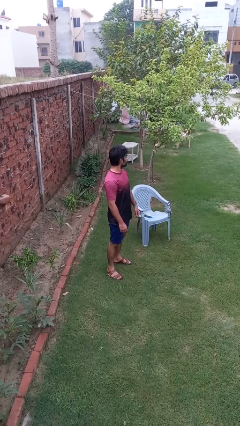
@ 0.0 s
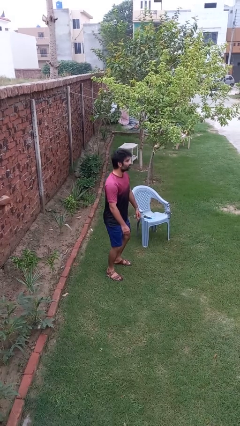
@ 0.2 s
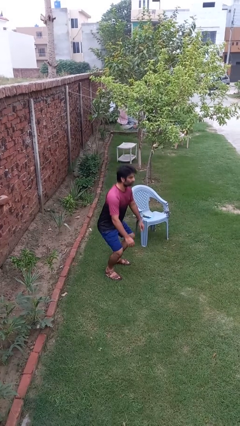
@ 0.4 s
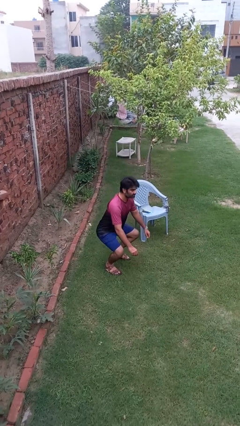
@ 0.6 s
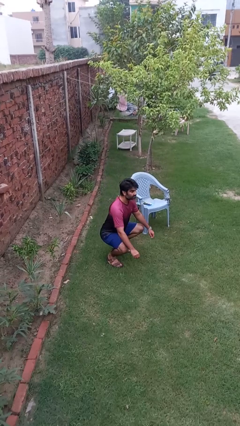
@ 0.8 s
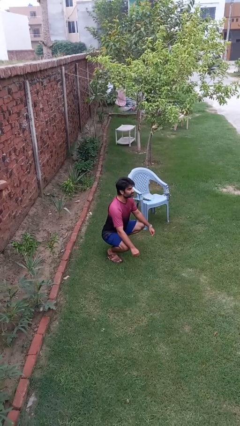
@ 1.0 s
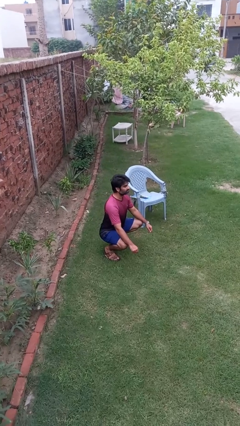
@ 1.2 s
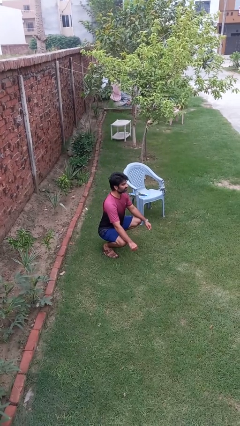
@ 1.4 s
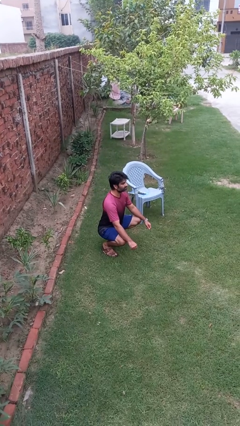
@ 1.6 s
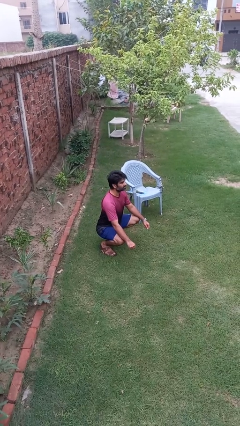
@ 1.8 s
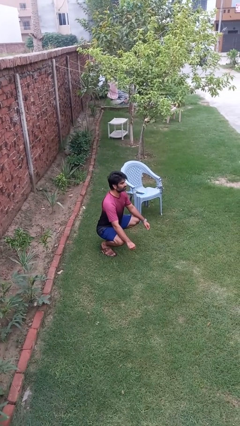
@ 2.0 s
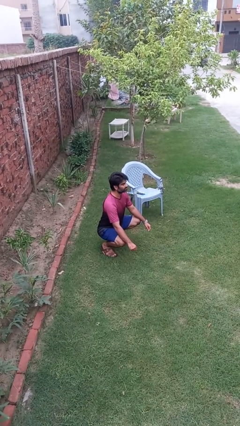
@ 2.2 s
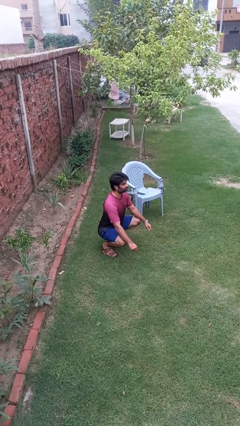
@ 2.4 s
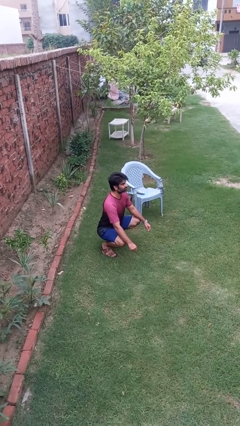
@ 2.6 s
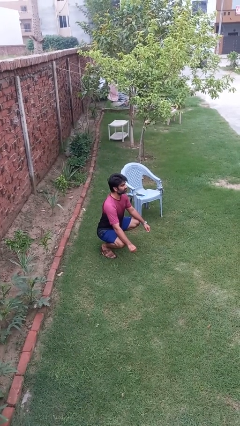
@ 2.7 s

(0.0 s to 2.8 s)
person squats

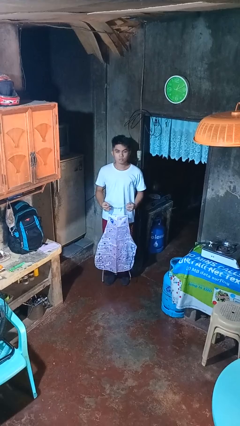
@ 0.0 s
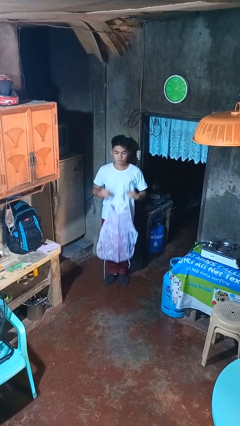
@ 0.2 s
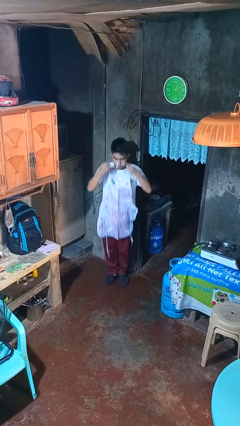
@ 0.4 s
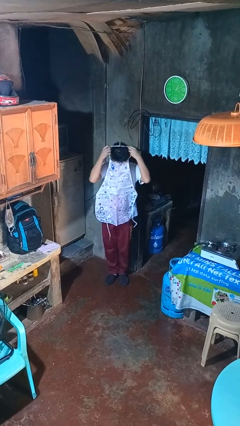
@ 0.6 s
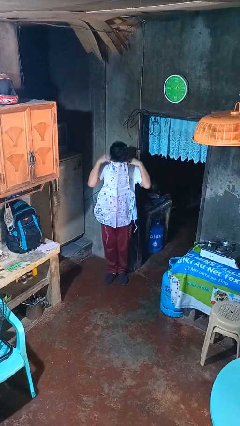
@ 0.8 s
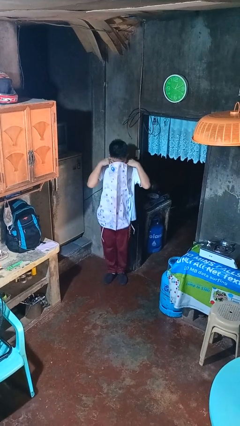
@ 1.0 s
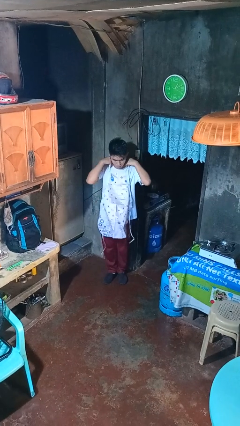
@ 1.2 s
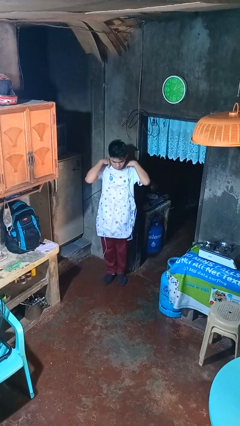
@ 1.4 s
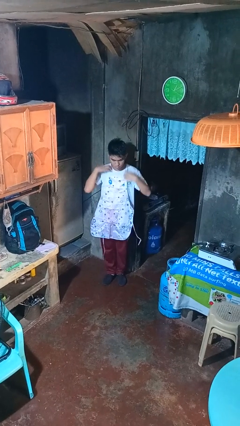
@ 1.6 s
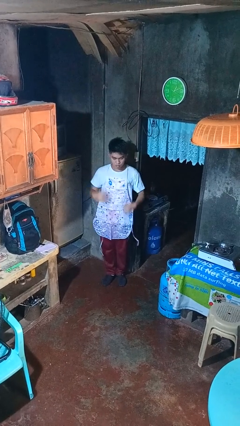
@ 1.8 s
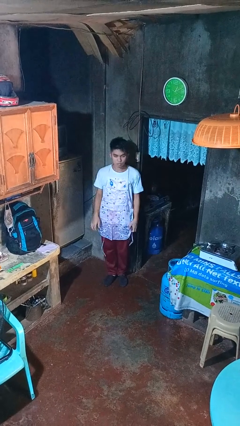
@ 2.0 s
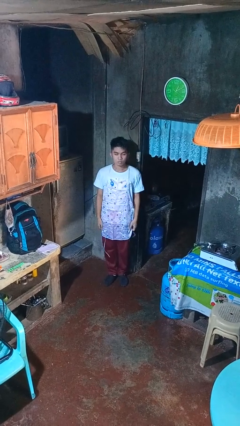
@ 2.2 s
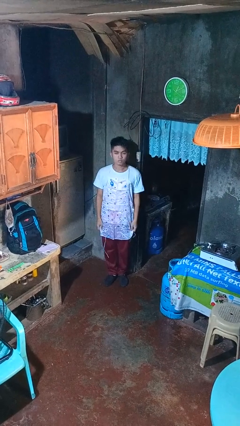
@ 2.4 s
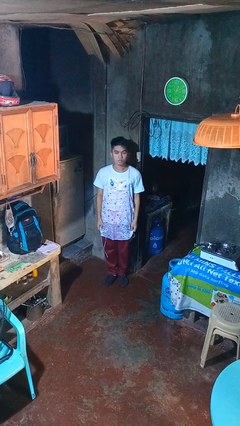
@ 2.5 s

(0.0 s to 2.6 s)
person puts on apron

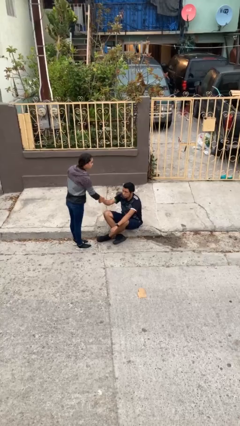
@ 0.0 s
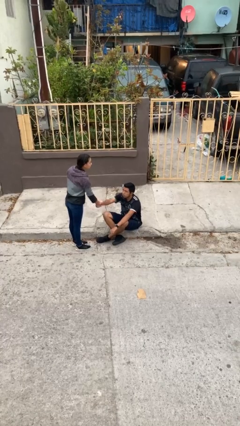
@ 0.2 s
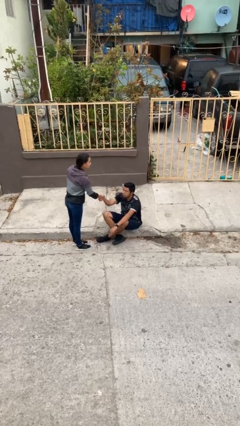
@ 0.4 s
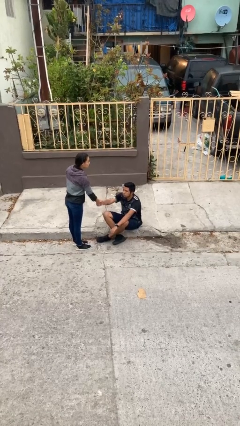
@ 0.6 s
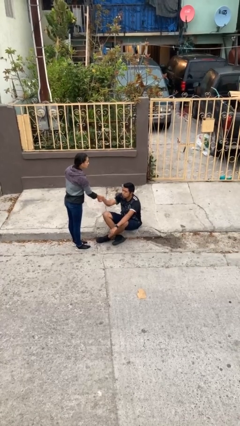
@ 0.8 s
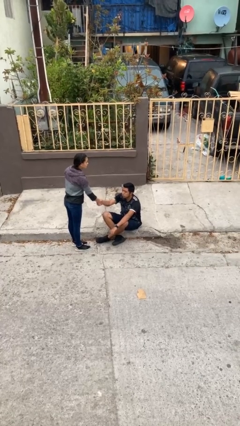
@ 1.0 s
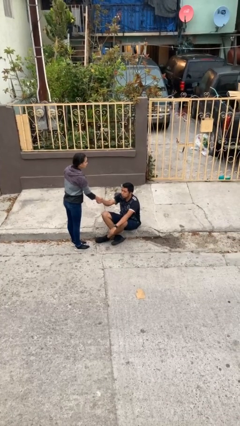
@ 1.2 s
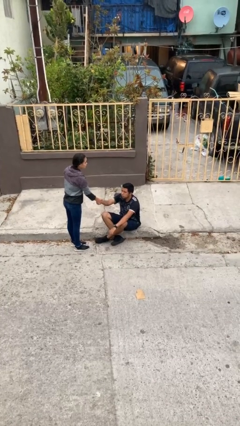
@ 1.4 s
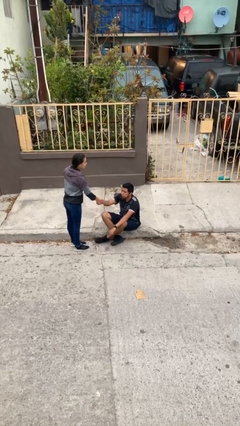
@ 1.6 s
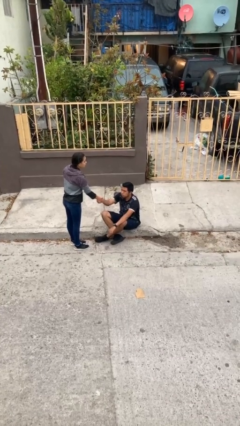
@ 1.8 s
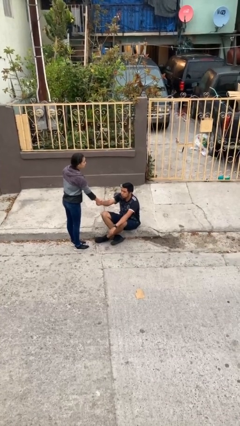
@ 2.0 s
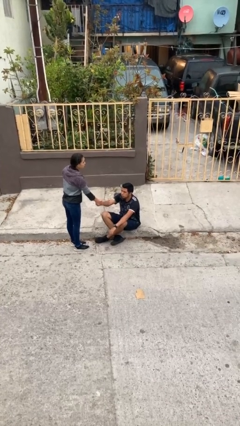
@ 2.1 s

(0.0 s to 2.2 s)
person shakes hand

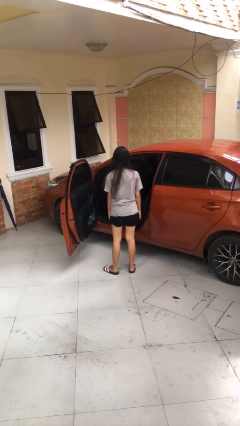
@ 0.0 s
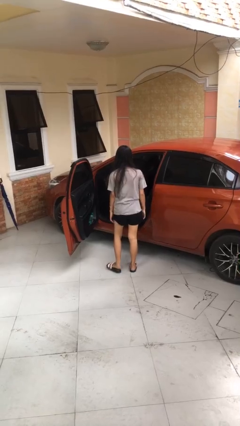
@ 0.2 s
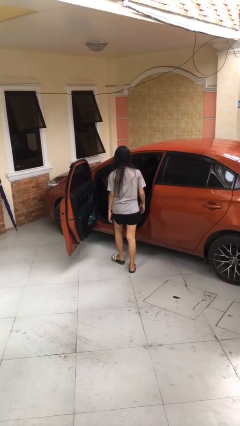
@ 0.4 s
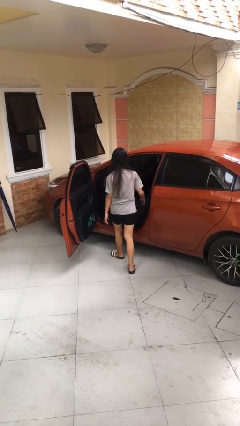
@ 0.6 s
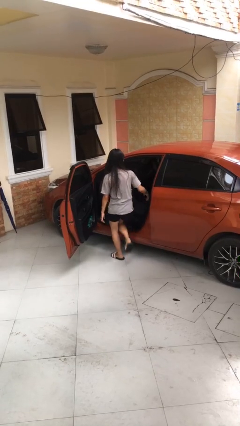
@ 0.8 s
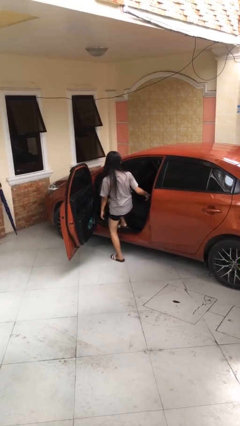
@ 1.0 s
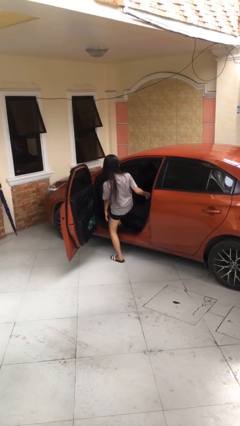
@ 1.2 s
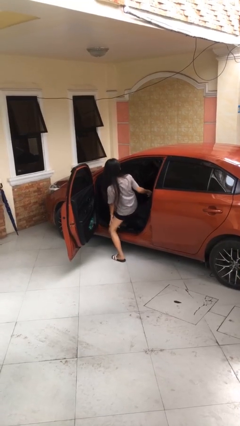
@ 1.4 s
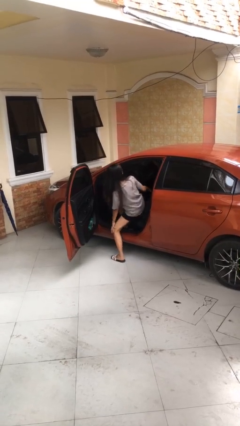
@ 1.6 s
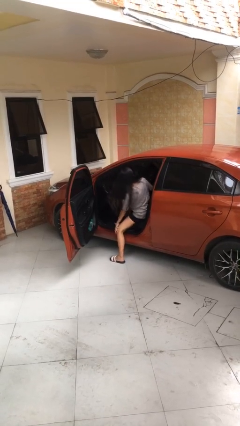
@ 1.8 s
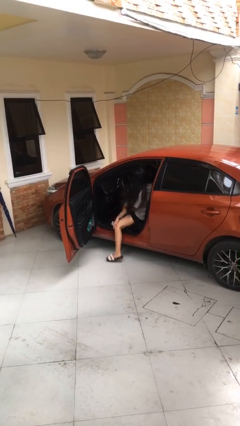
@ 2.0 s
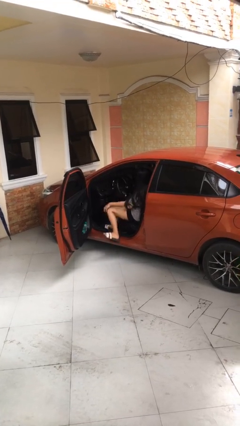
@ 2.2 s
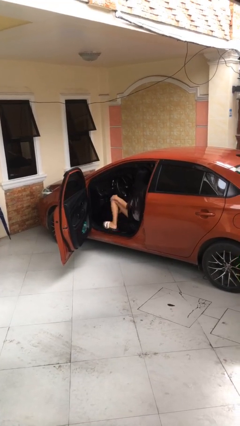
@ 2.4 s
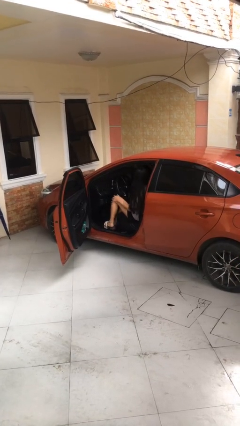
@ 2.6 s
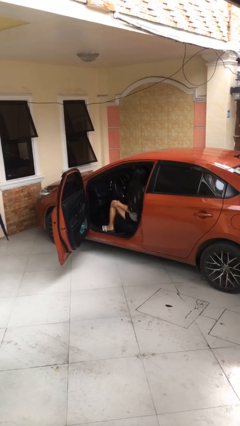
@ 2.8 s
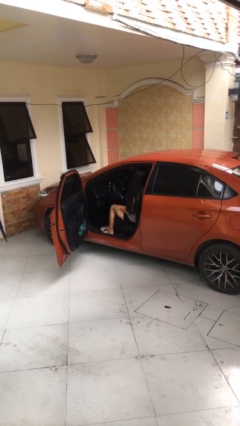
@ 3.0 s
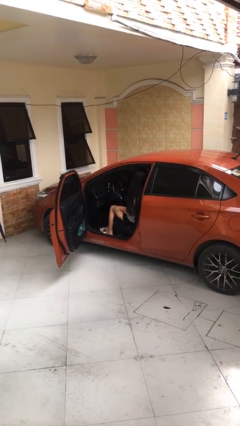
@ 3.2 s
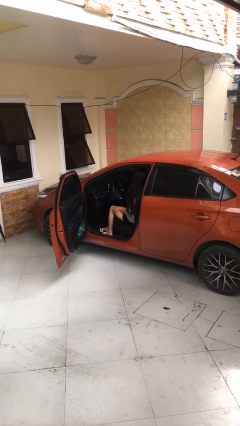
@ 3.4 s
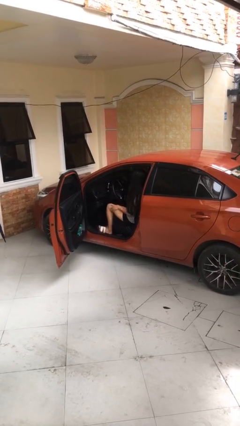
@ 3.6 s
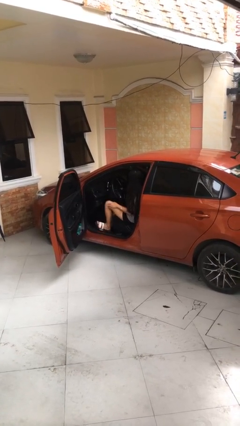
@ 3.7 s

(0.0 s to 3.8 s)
person enters car

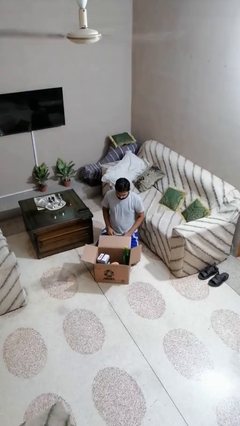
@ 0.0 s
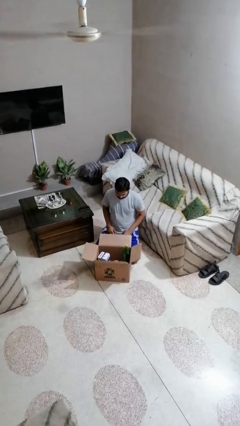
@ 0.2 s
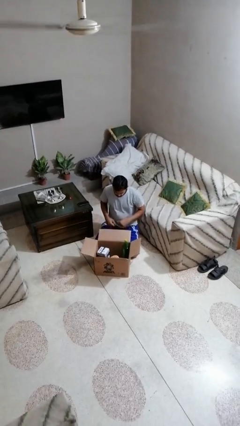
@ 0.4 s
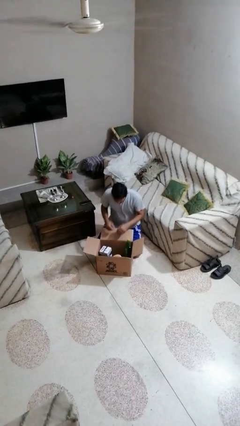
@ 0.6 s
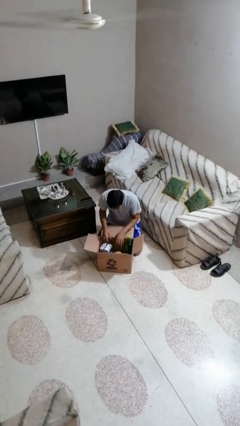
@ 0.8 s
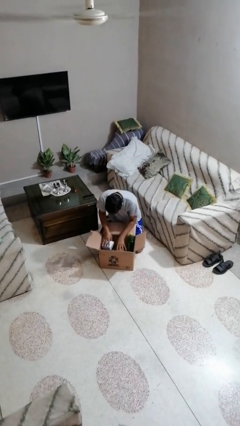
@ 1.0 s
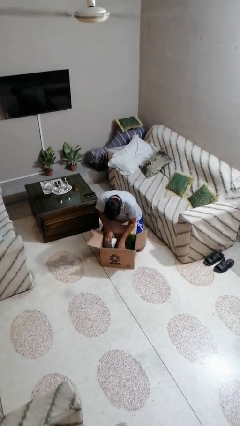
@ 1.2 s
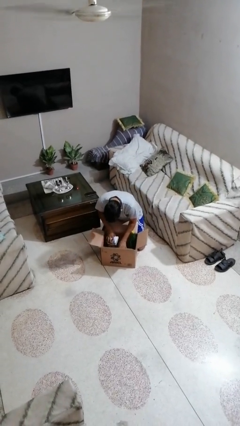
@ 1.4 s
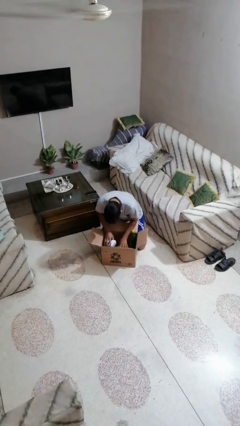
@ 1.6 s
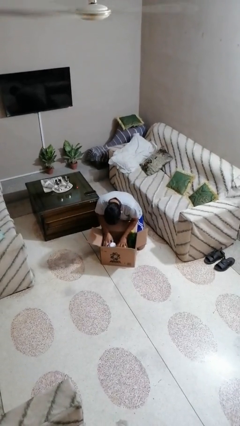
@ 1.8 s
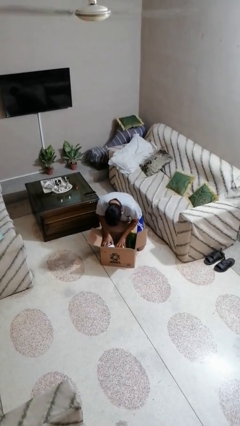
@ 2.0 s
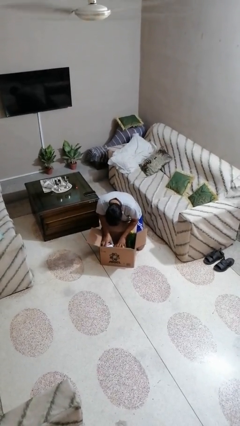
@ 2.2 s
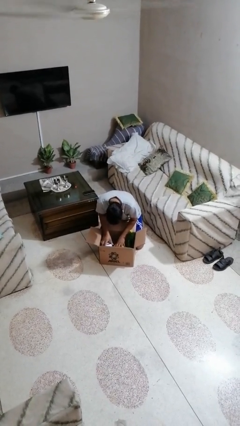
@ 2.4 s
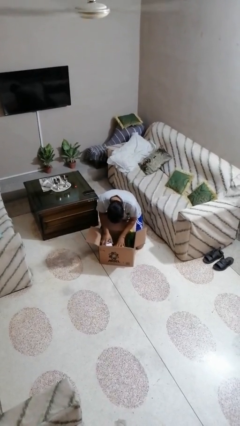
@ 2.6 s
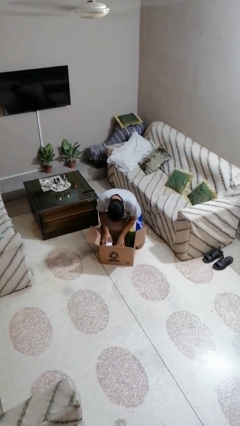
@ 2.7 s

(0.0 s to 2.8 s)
person searches in box

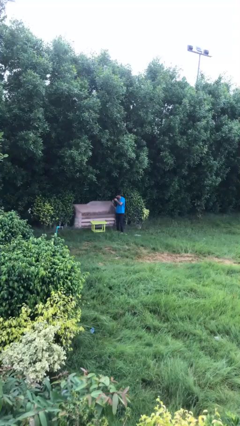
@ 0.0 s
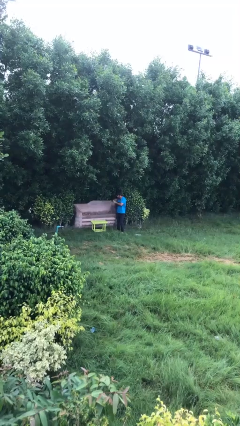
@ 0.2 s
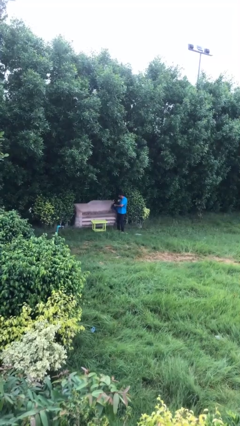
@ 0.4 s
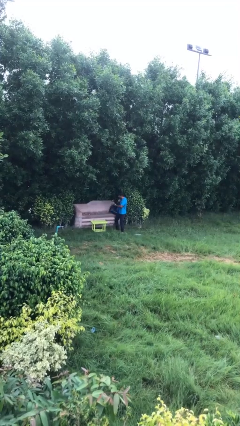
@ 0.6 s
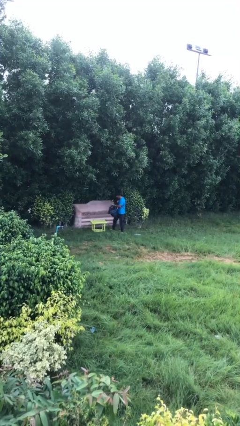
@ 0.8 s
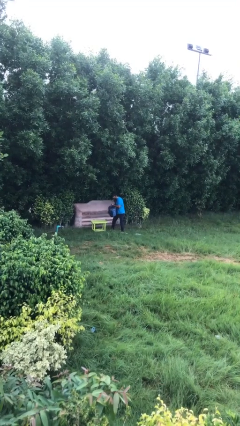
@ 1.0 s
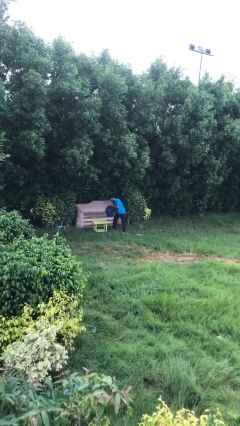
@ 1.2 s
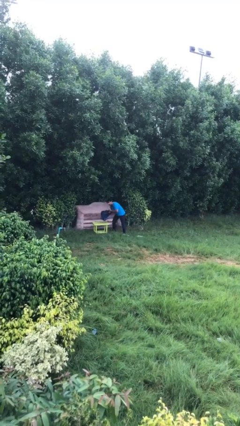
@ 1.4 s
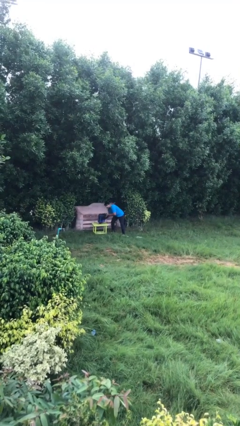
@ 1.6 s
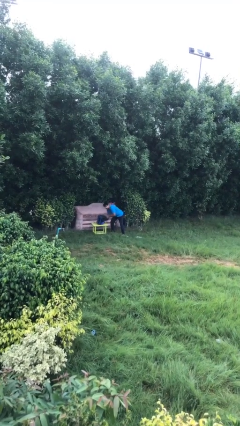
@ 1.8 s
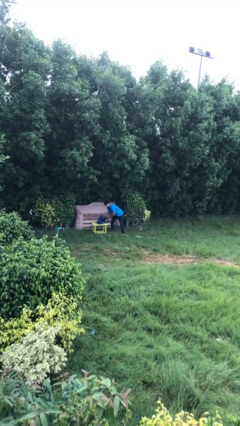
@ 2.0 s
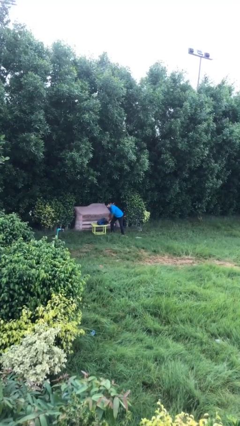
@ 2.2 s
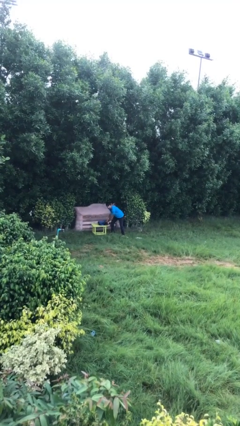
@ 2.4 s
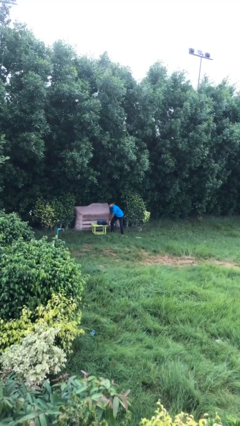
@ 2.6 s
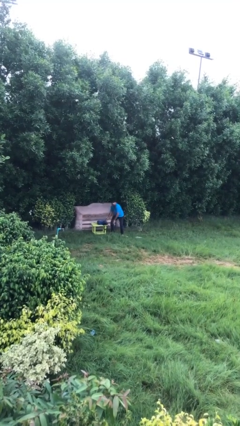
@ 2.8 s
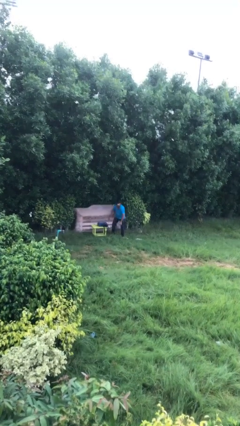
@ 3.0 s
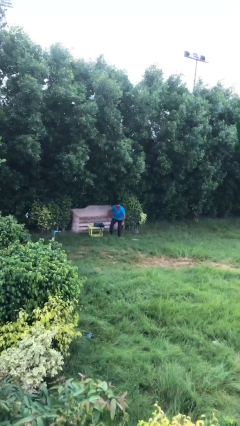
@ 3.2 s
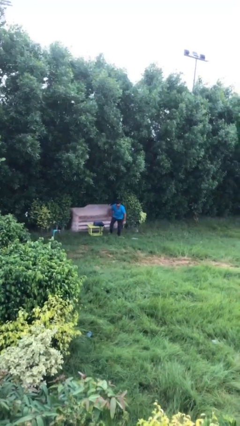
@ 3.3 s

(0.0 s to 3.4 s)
person puts down object on table
